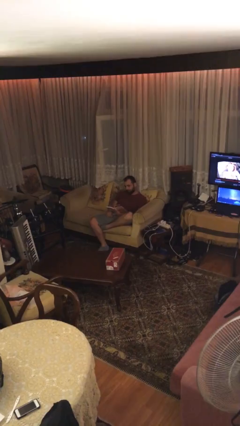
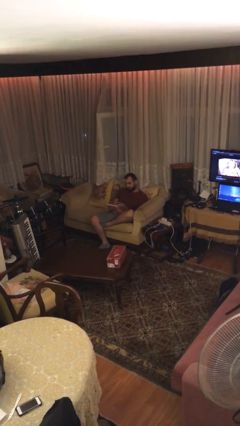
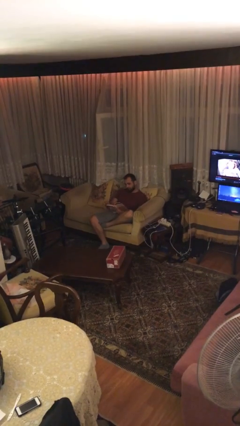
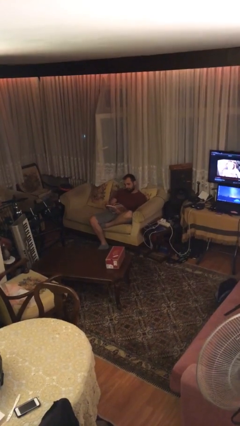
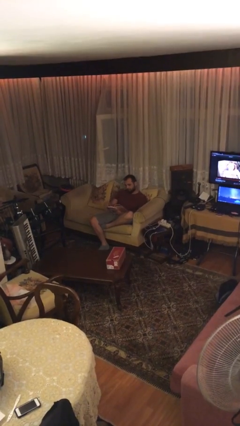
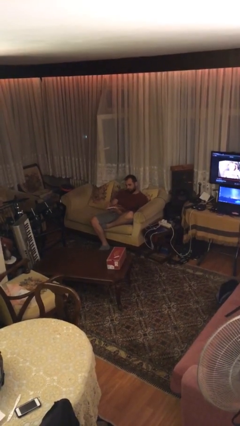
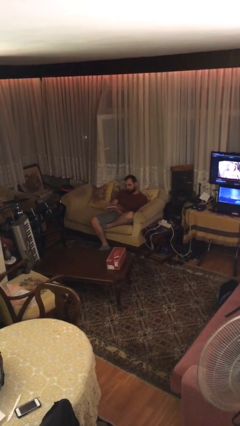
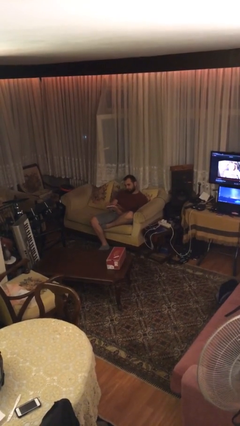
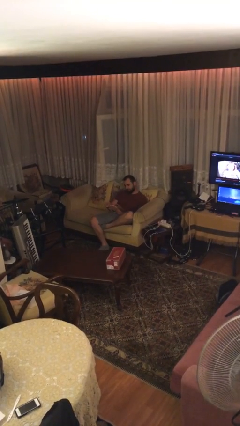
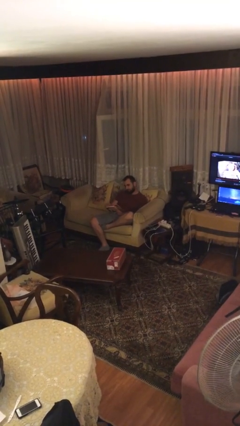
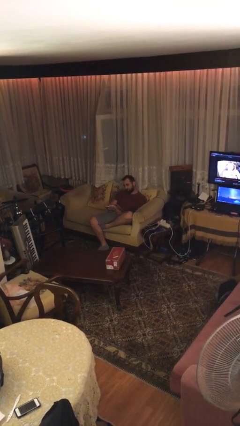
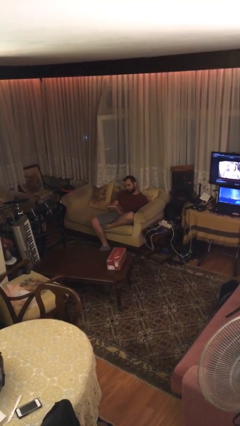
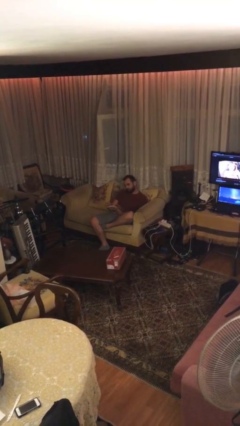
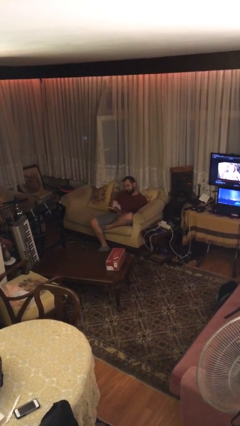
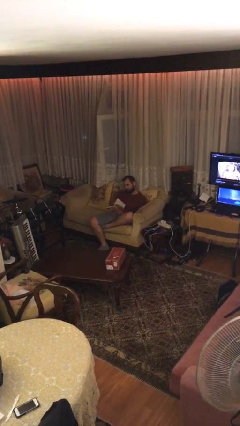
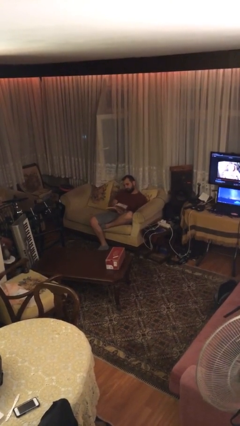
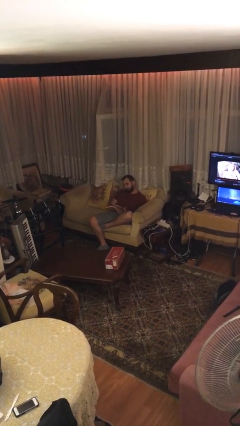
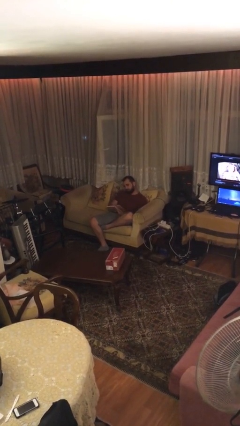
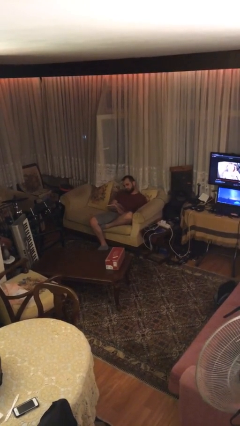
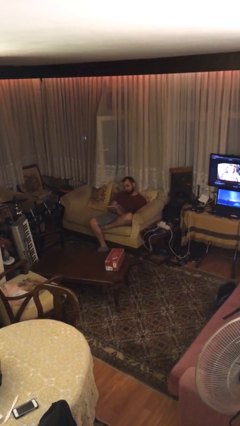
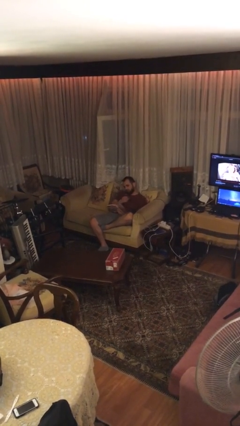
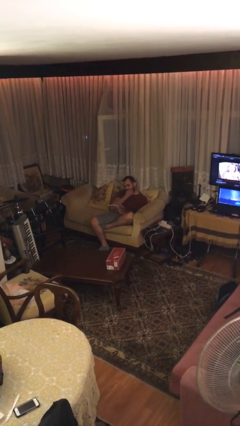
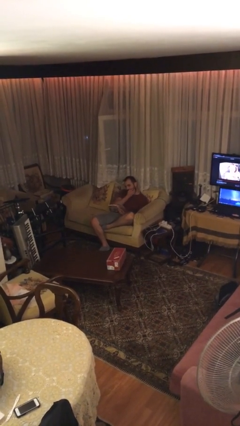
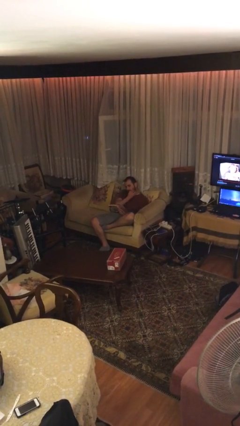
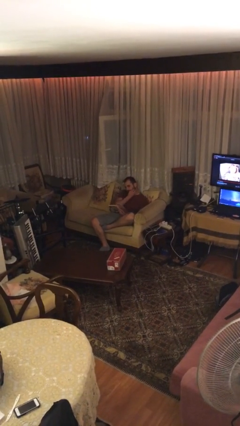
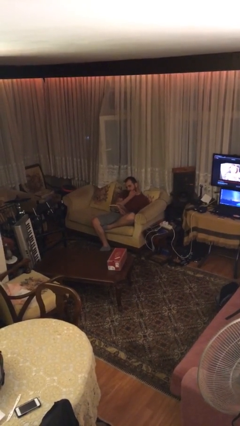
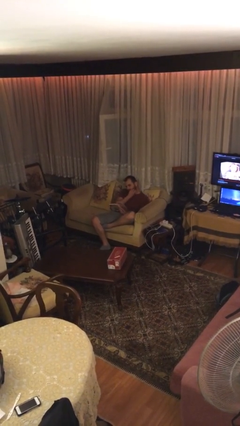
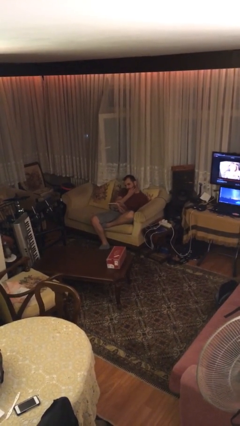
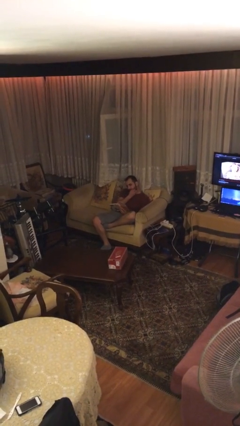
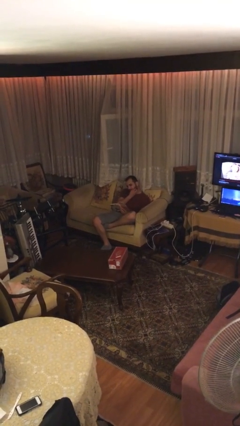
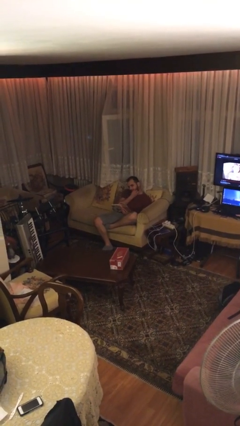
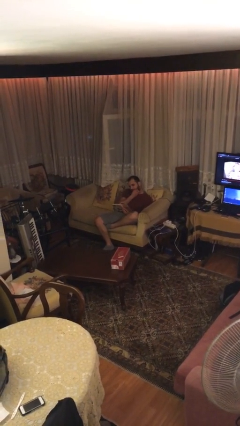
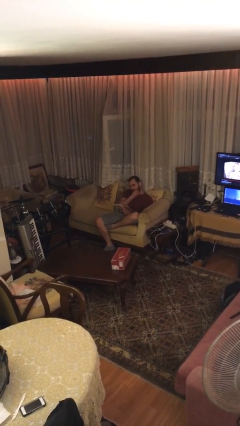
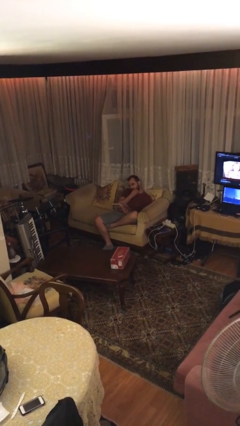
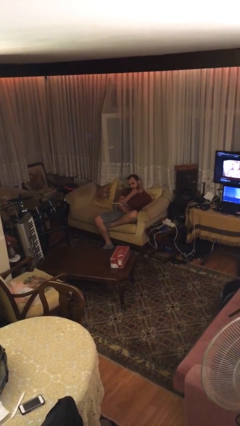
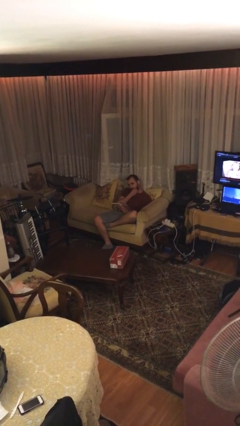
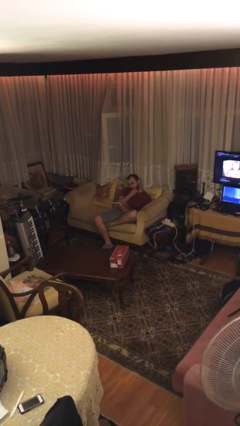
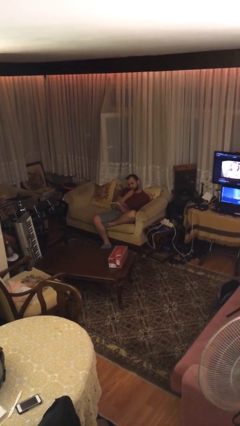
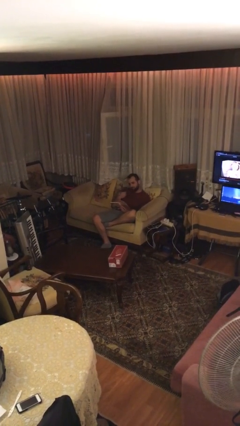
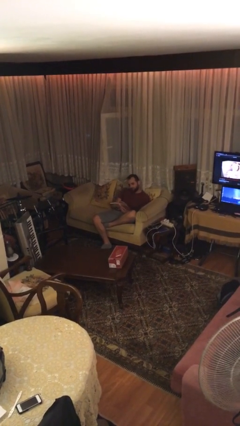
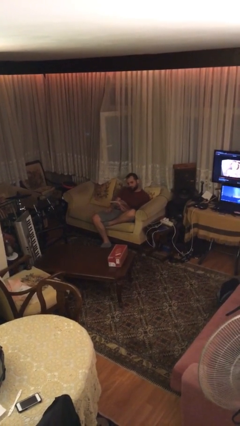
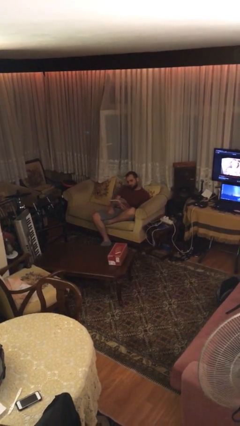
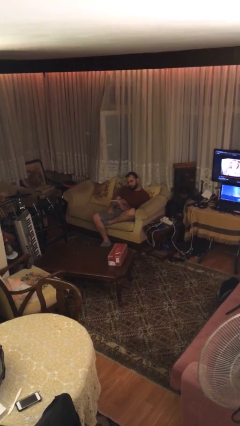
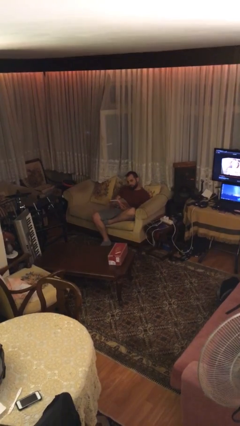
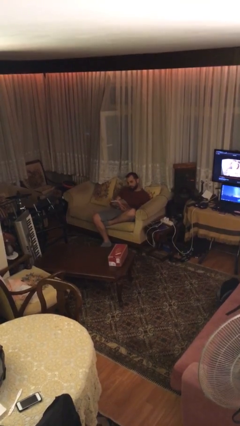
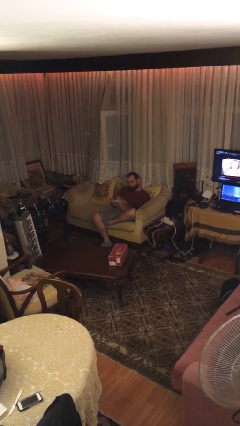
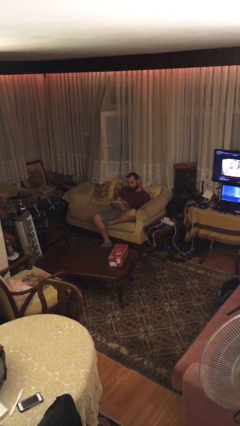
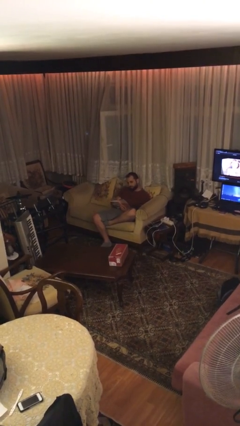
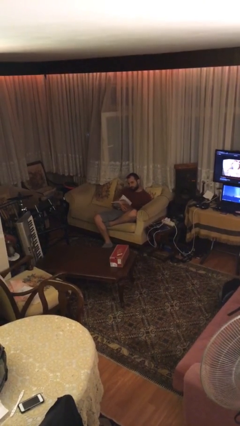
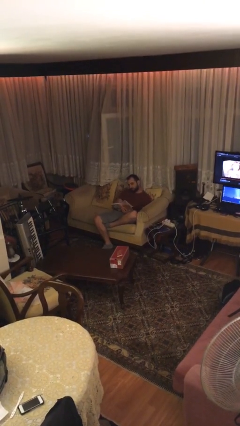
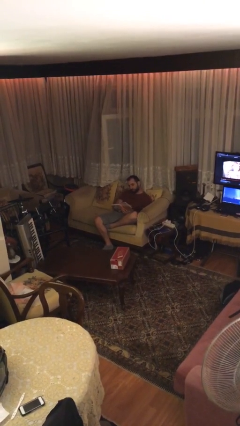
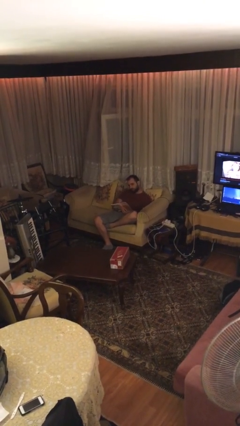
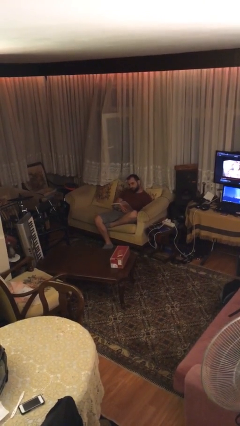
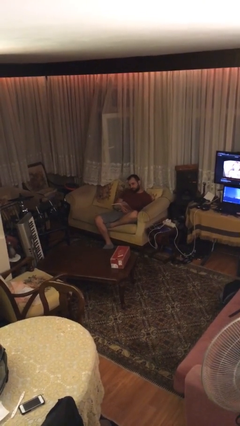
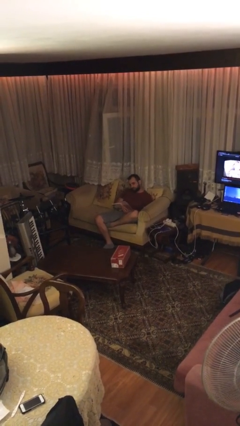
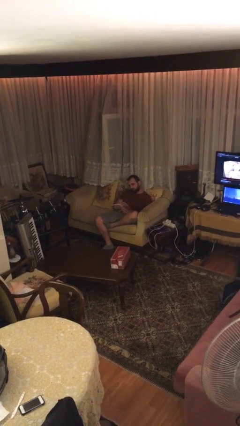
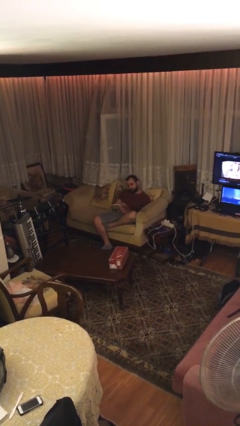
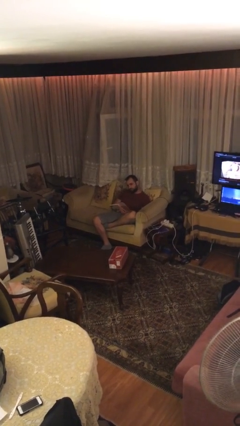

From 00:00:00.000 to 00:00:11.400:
person reads document

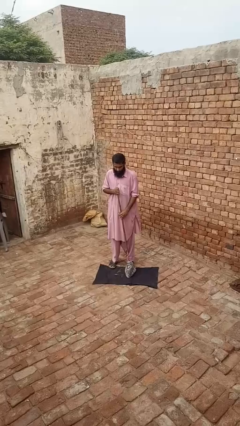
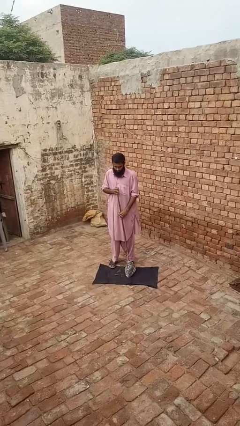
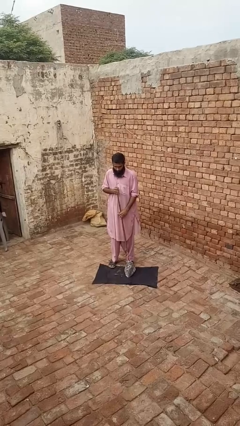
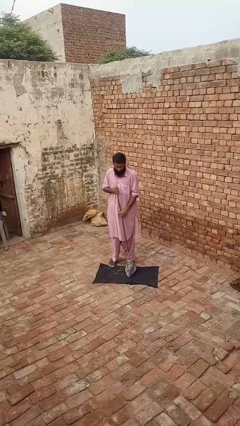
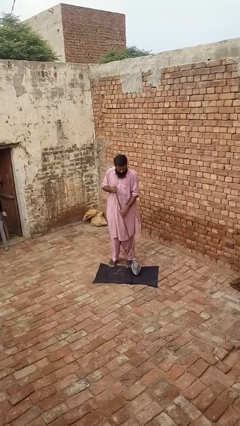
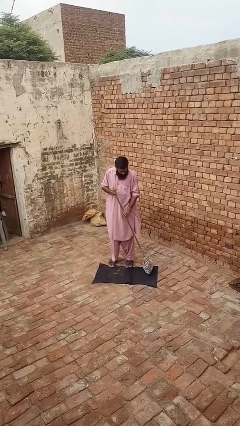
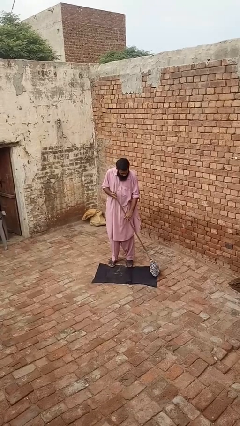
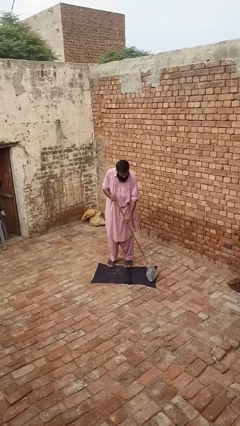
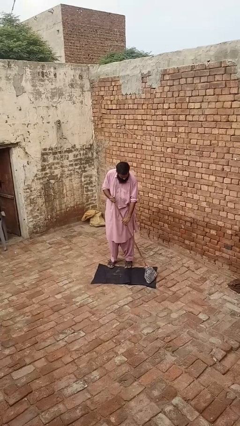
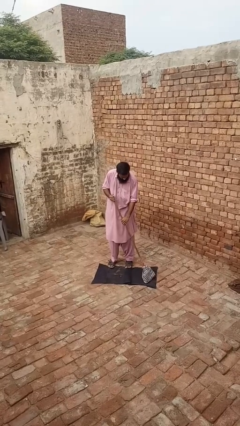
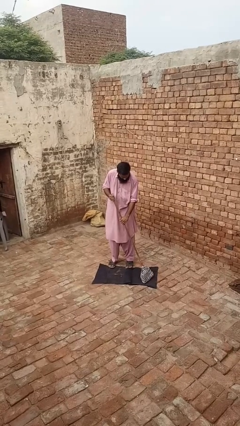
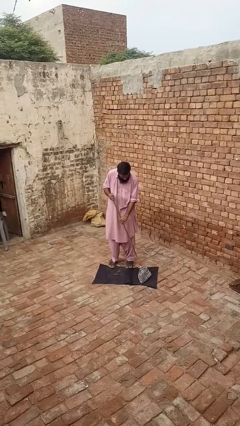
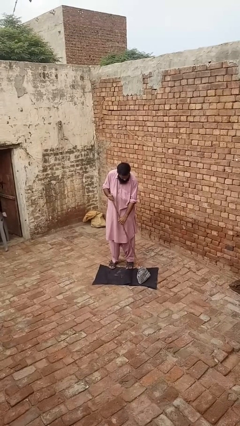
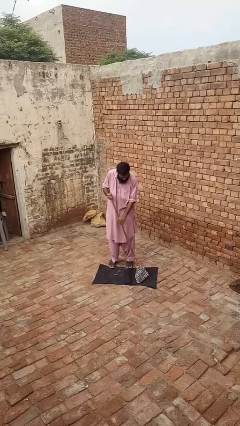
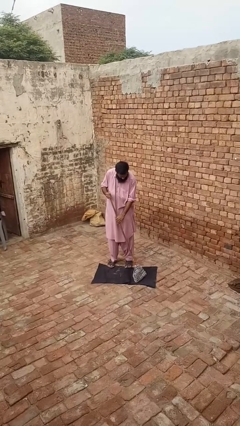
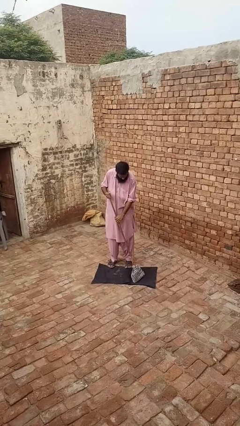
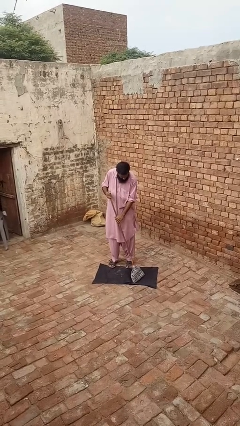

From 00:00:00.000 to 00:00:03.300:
person vacuums carpet

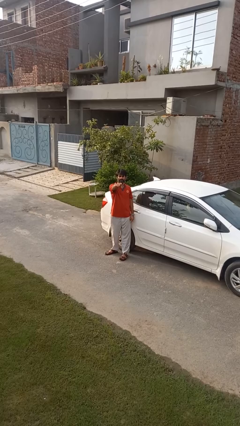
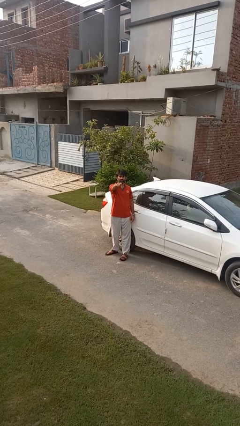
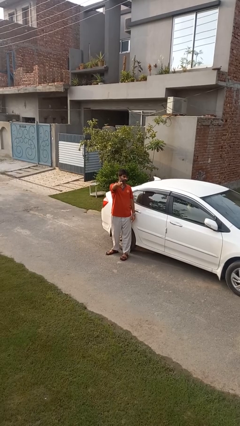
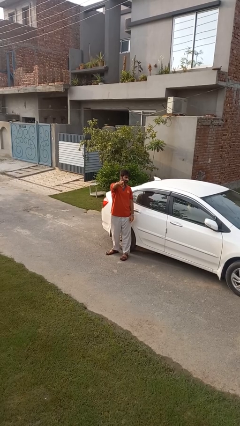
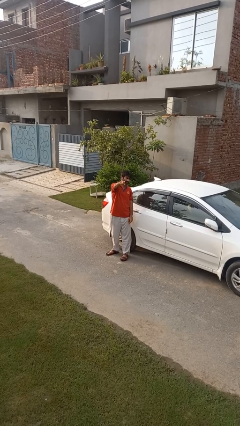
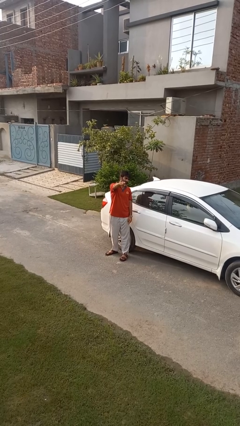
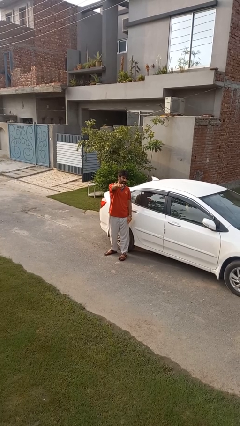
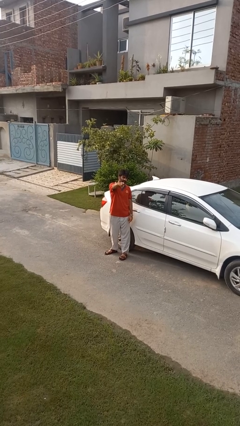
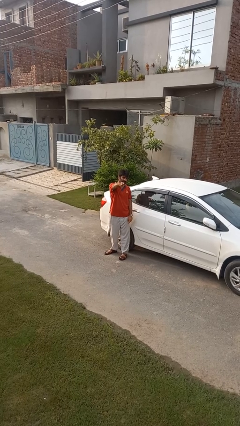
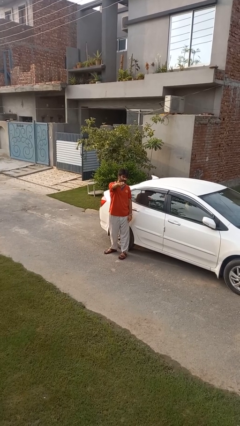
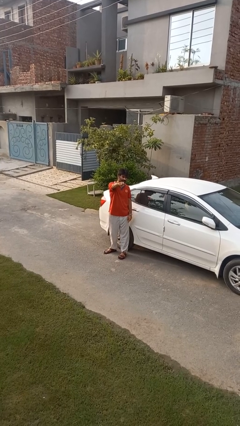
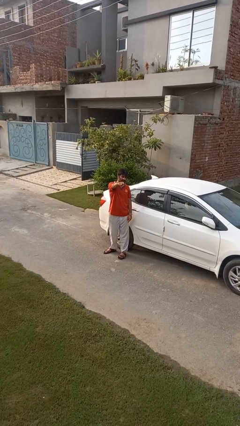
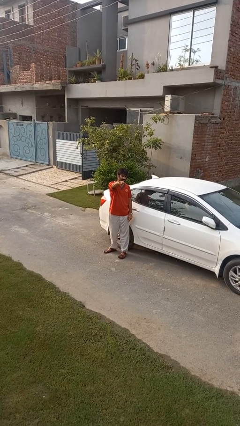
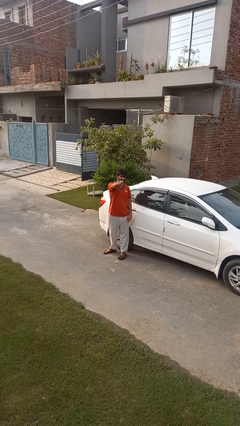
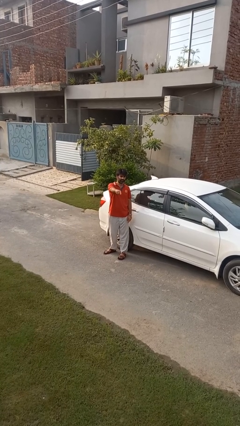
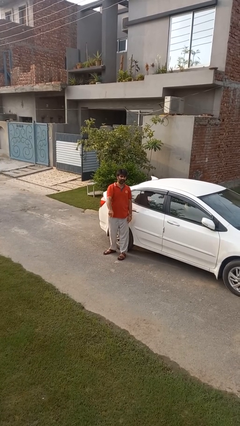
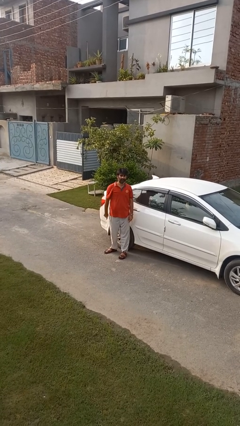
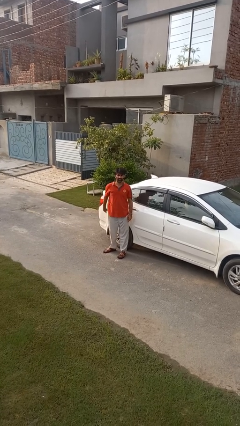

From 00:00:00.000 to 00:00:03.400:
person points at person
